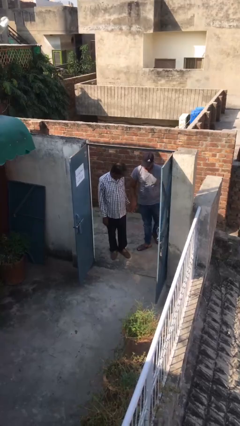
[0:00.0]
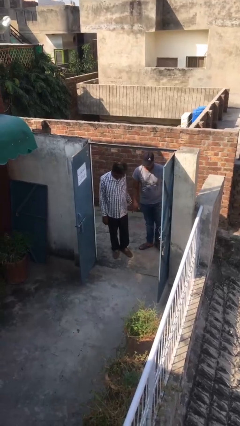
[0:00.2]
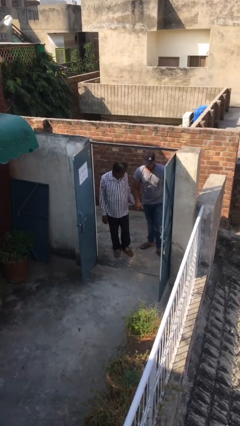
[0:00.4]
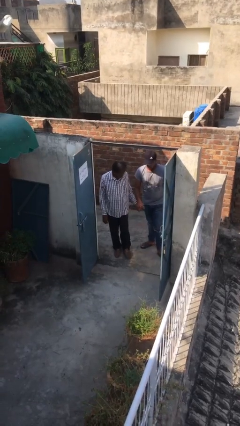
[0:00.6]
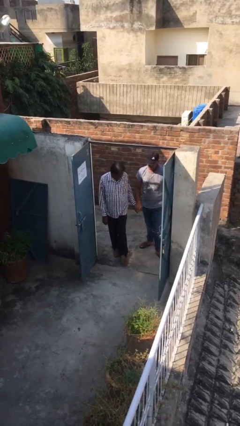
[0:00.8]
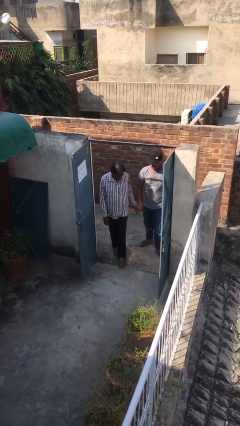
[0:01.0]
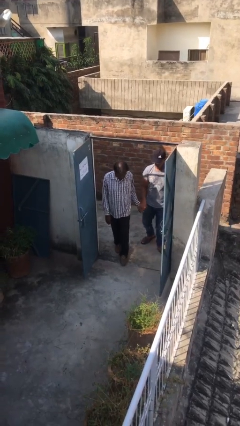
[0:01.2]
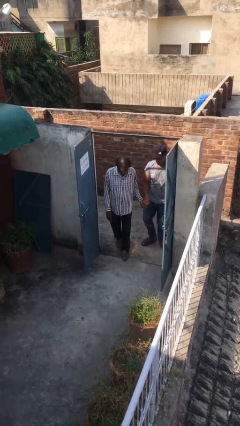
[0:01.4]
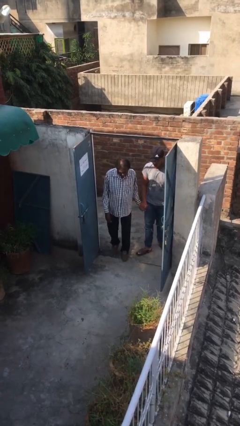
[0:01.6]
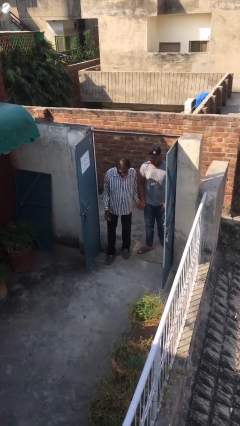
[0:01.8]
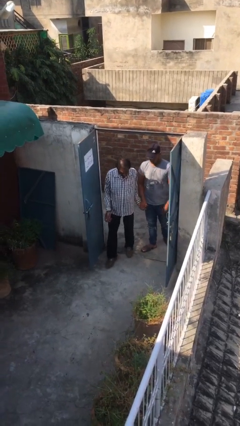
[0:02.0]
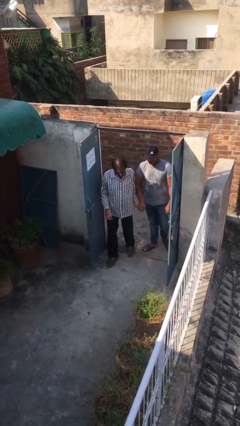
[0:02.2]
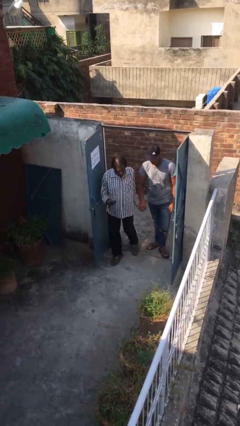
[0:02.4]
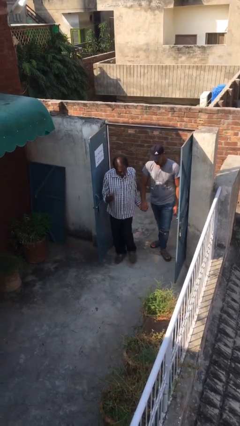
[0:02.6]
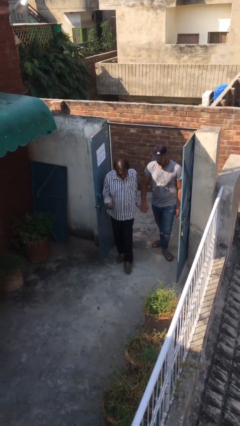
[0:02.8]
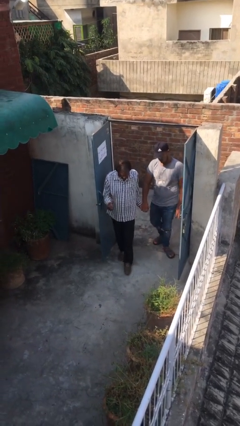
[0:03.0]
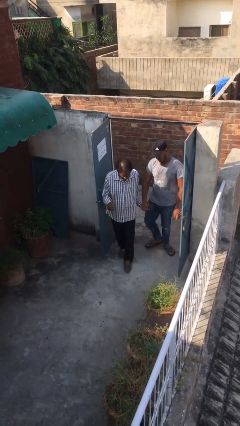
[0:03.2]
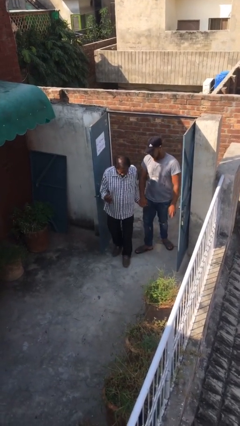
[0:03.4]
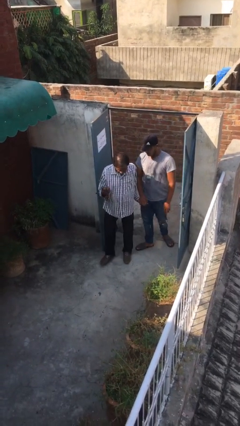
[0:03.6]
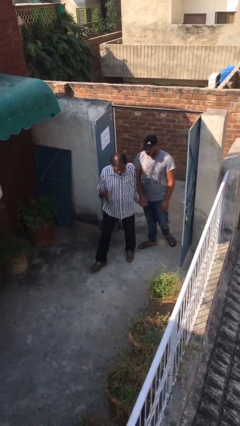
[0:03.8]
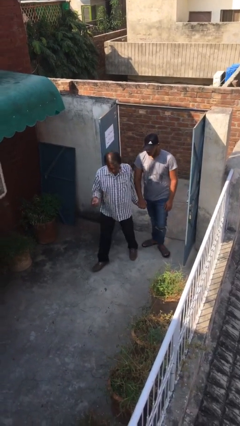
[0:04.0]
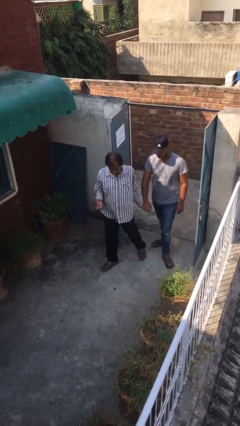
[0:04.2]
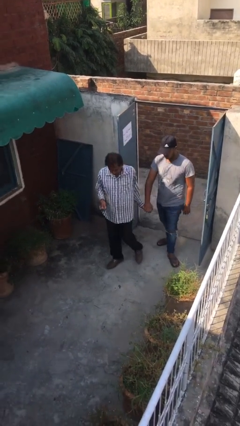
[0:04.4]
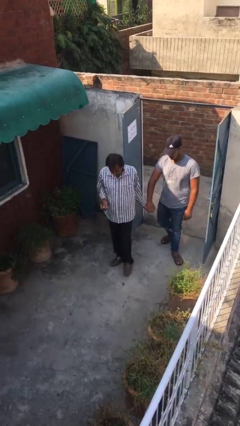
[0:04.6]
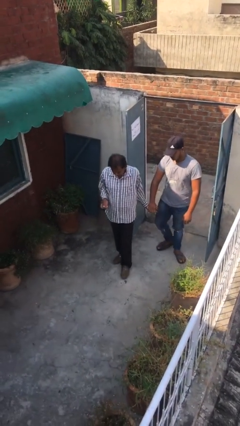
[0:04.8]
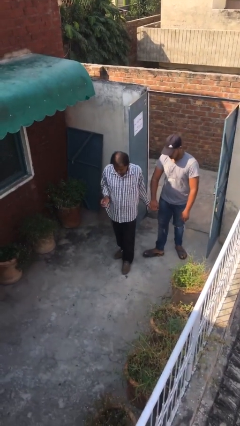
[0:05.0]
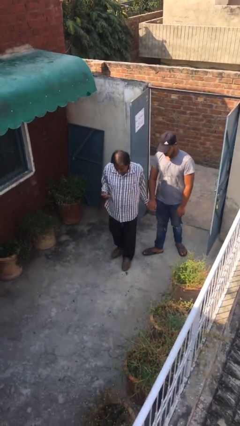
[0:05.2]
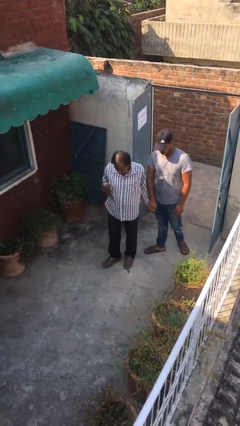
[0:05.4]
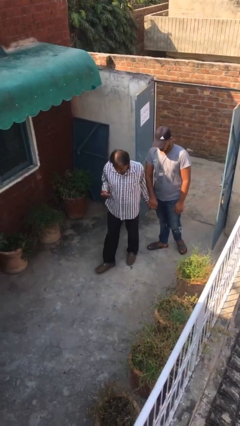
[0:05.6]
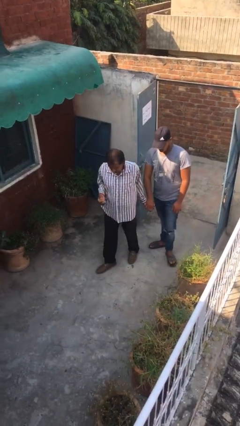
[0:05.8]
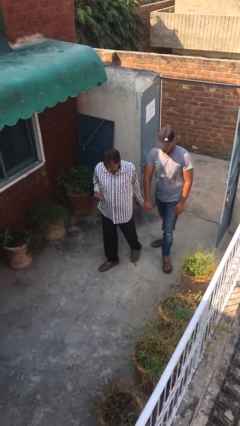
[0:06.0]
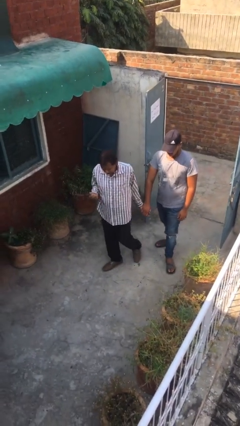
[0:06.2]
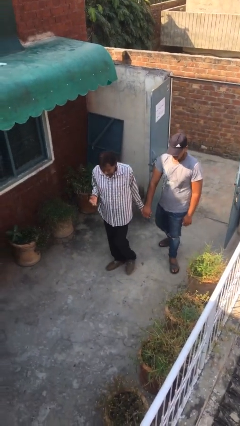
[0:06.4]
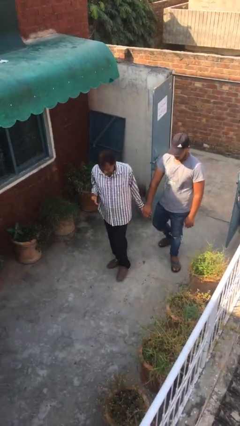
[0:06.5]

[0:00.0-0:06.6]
person holds hand

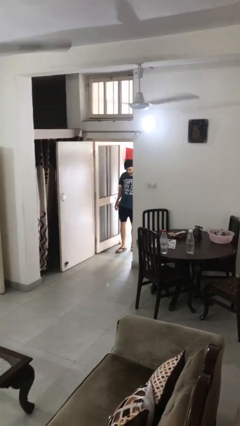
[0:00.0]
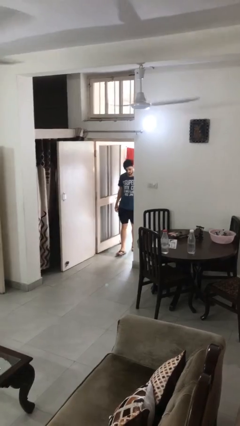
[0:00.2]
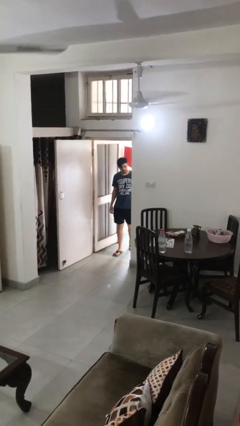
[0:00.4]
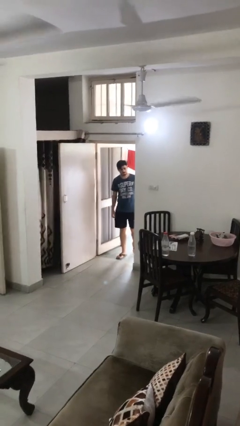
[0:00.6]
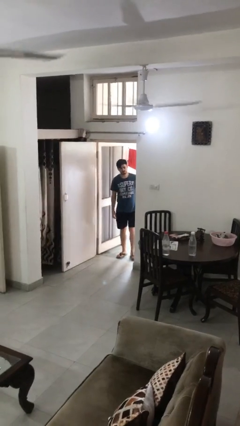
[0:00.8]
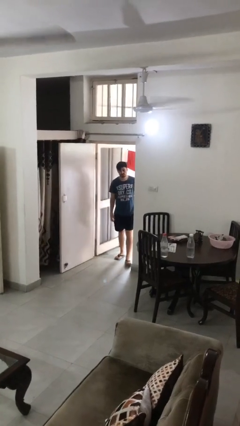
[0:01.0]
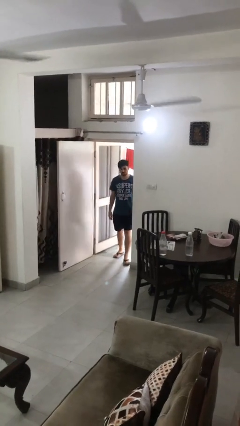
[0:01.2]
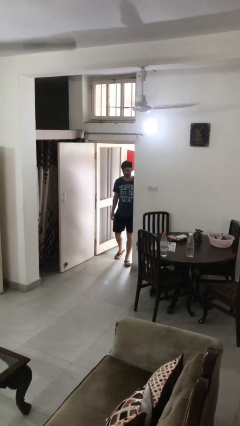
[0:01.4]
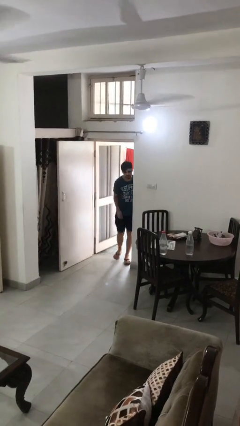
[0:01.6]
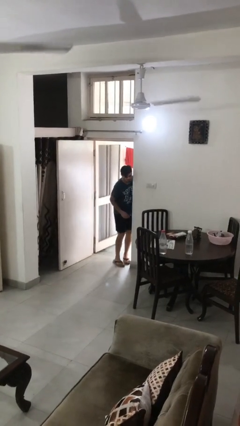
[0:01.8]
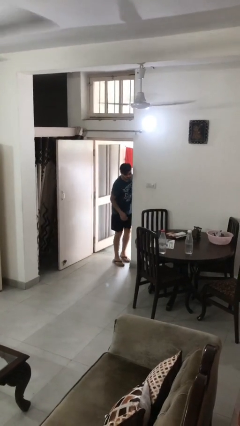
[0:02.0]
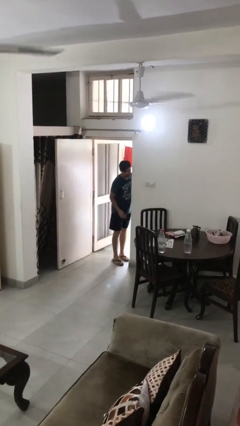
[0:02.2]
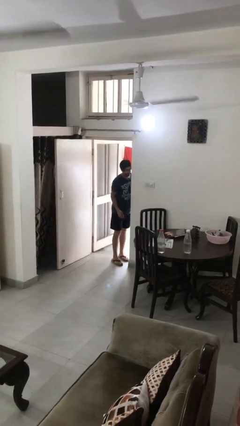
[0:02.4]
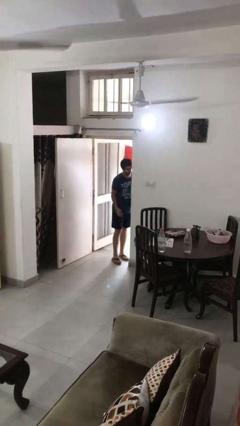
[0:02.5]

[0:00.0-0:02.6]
person bumps into wall

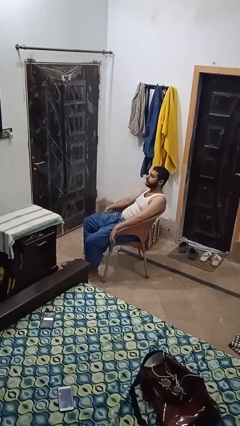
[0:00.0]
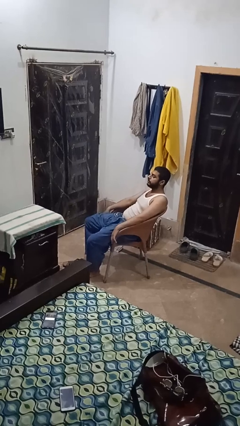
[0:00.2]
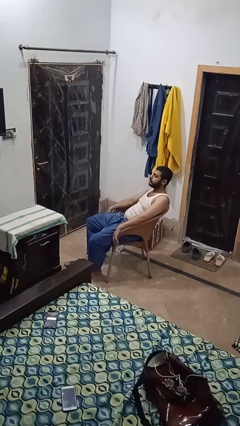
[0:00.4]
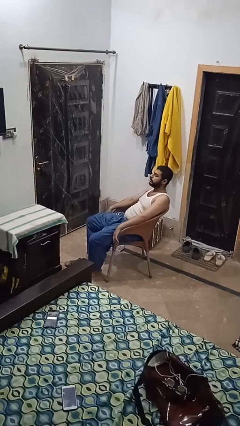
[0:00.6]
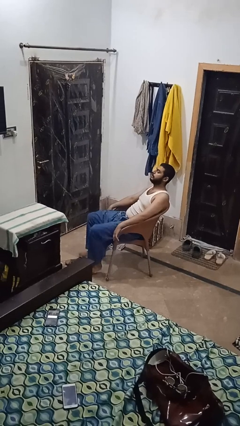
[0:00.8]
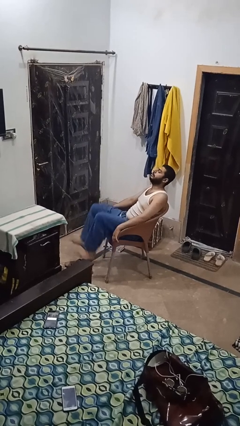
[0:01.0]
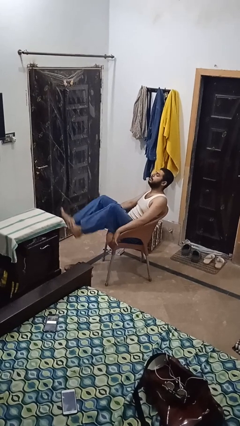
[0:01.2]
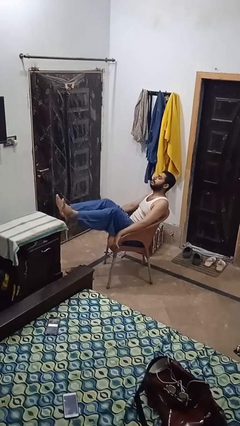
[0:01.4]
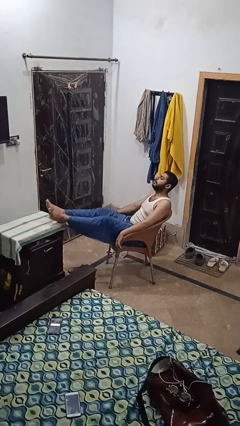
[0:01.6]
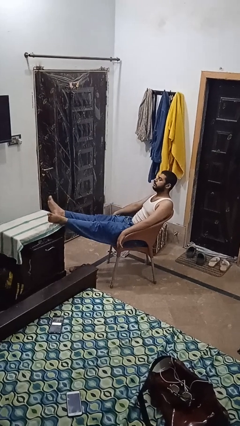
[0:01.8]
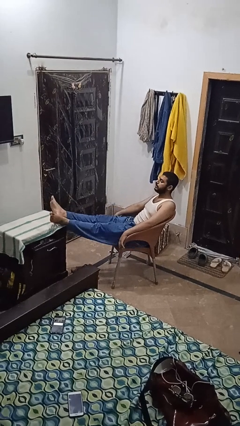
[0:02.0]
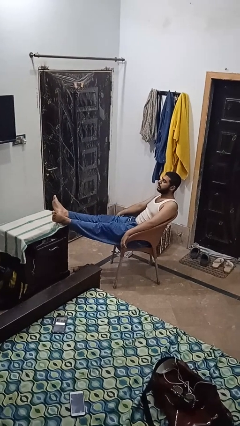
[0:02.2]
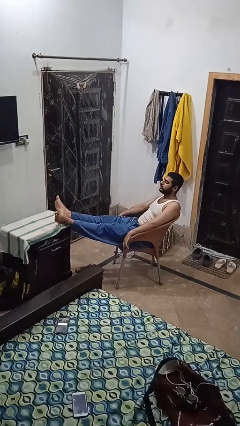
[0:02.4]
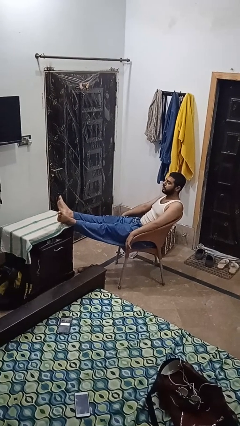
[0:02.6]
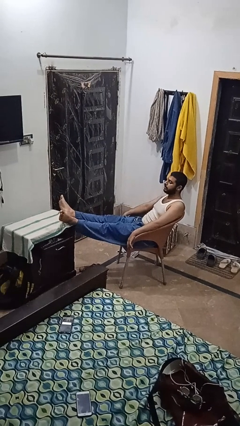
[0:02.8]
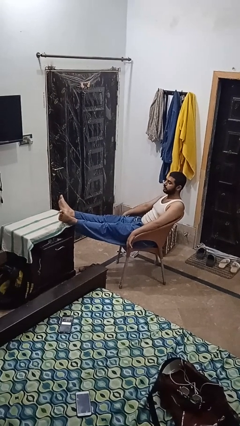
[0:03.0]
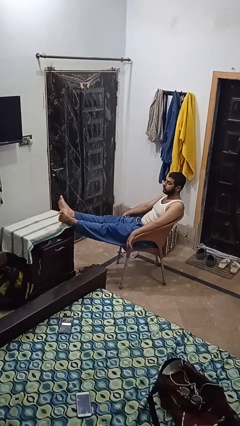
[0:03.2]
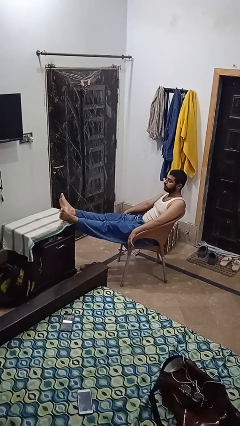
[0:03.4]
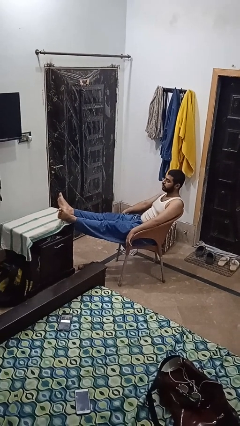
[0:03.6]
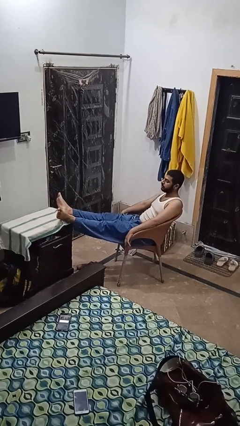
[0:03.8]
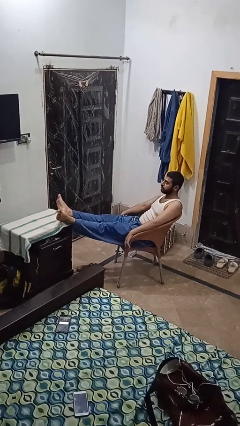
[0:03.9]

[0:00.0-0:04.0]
person puts feet up

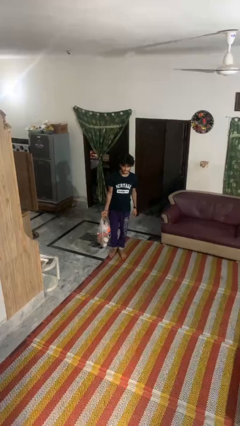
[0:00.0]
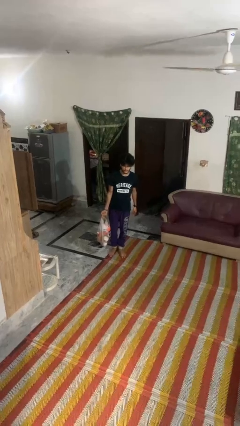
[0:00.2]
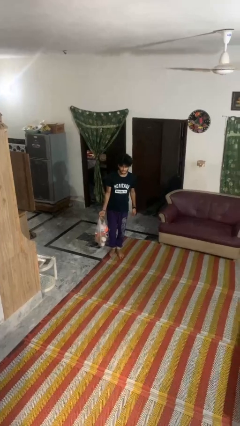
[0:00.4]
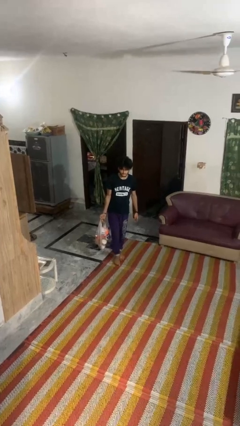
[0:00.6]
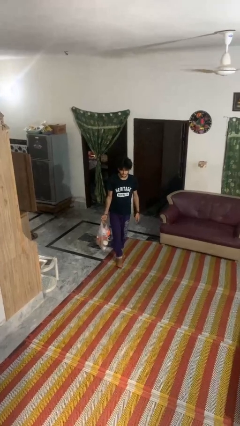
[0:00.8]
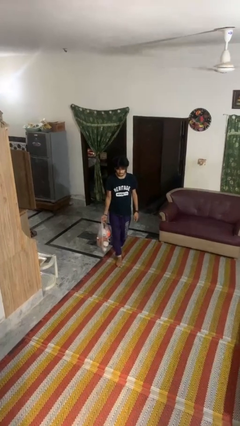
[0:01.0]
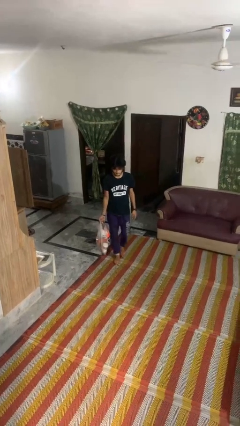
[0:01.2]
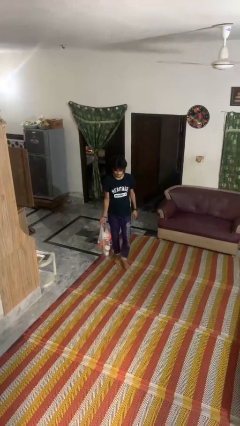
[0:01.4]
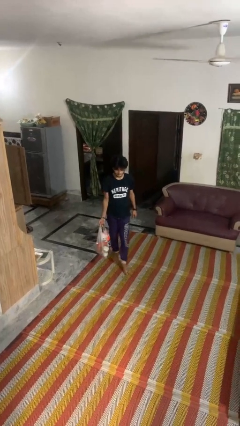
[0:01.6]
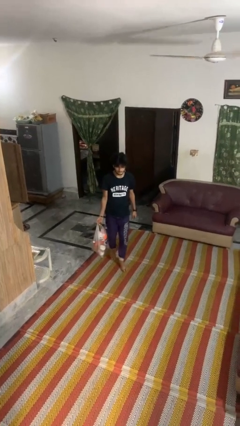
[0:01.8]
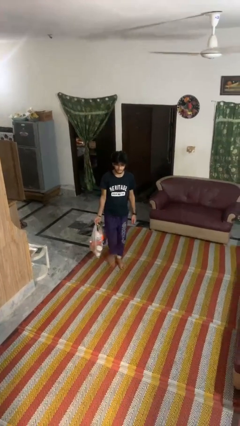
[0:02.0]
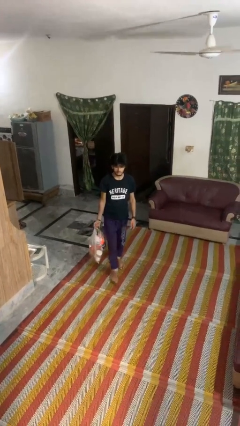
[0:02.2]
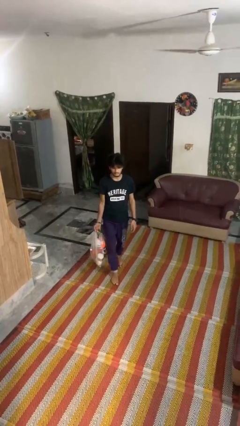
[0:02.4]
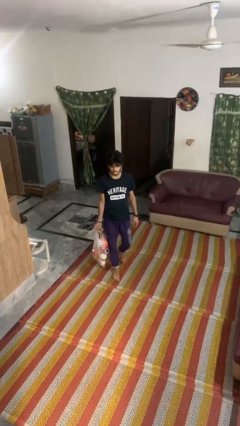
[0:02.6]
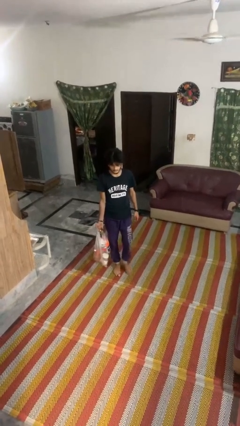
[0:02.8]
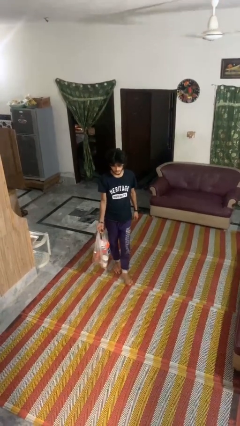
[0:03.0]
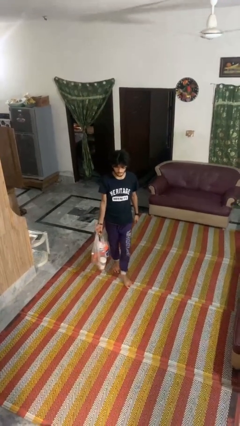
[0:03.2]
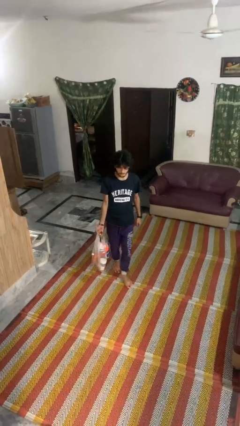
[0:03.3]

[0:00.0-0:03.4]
person carries groceries

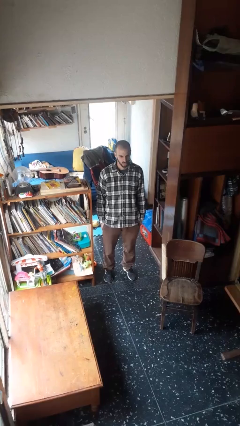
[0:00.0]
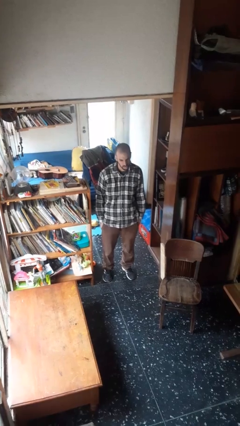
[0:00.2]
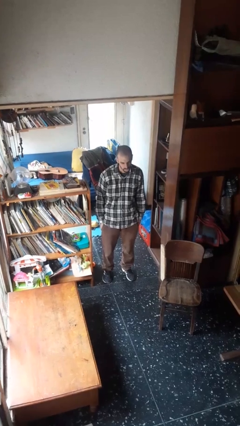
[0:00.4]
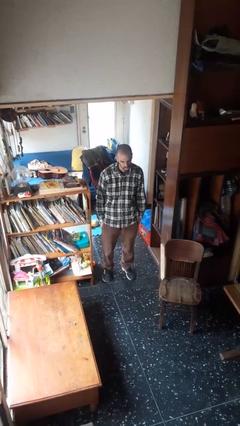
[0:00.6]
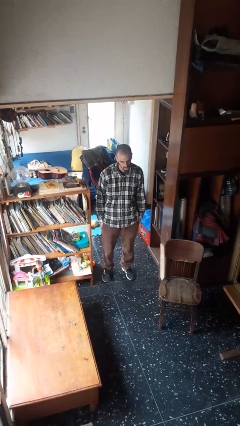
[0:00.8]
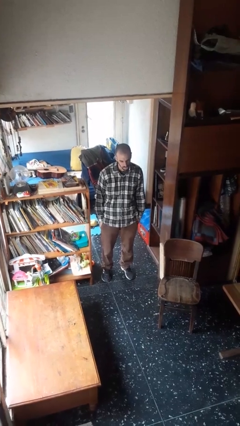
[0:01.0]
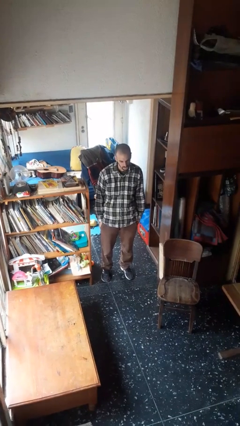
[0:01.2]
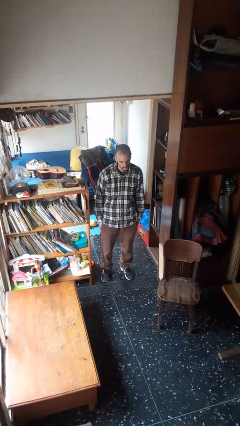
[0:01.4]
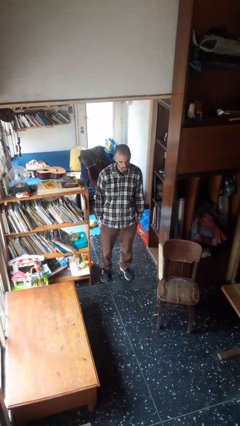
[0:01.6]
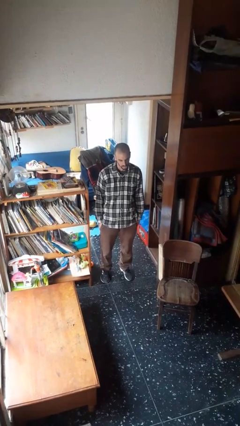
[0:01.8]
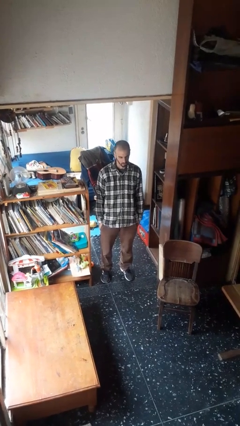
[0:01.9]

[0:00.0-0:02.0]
person sticks out tongue
